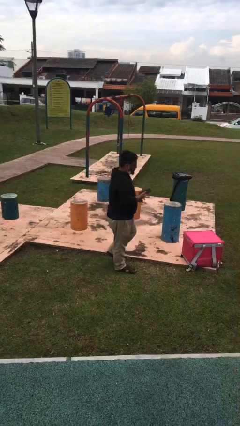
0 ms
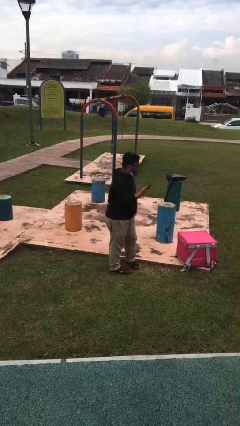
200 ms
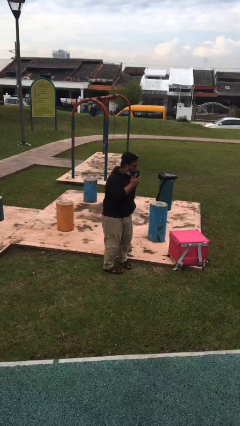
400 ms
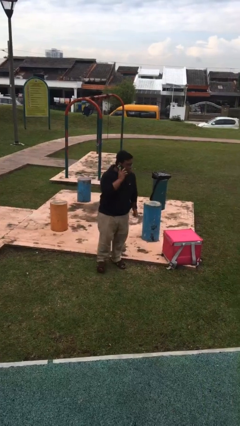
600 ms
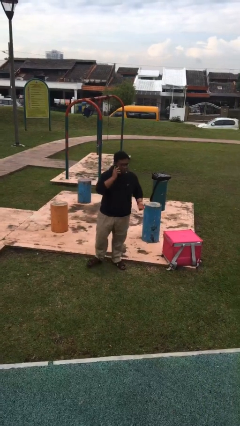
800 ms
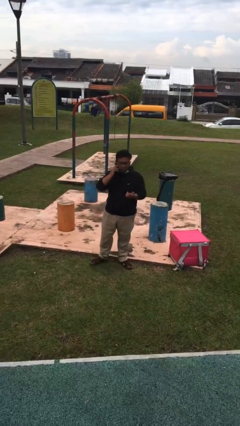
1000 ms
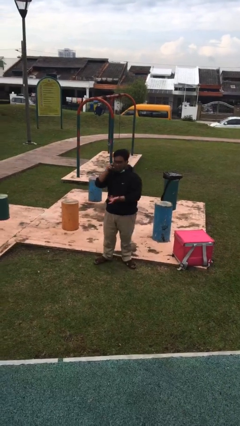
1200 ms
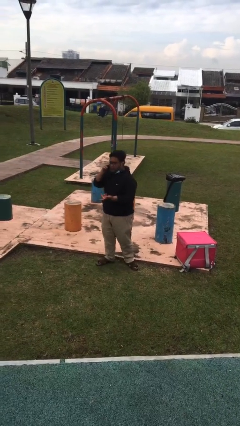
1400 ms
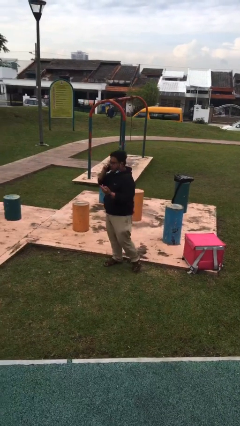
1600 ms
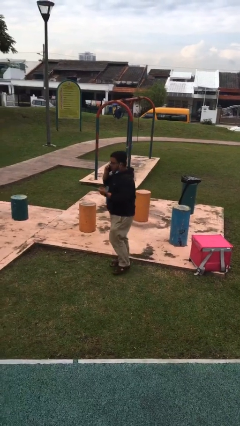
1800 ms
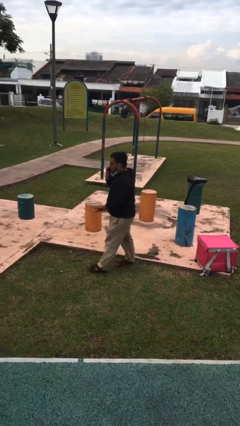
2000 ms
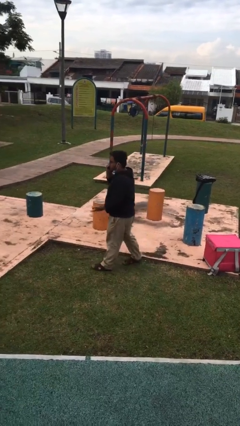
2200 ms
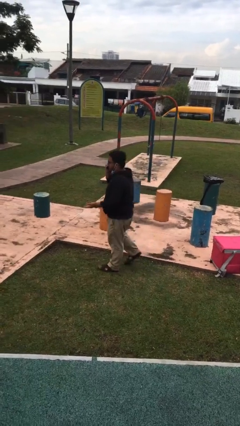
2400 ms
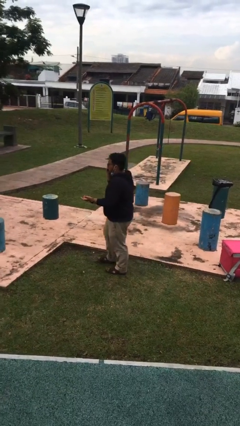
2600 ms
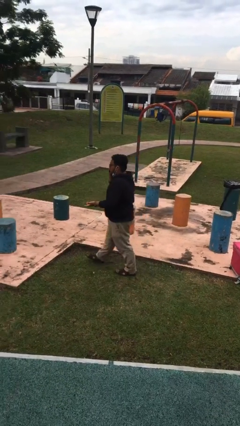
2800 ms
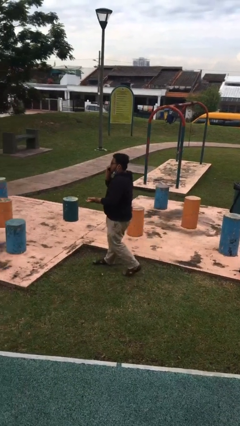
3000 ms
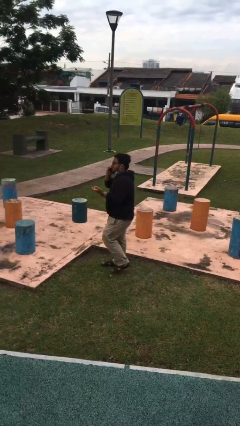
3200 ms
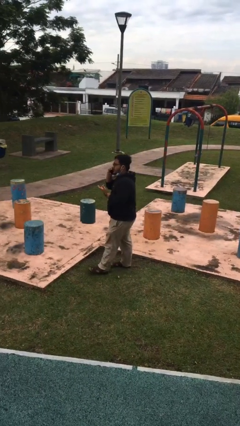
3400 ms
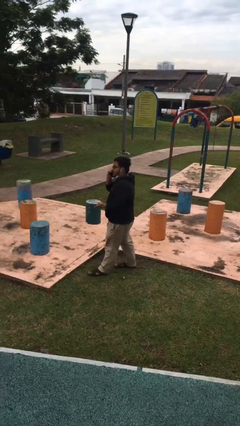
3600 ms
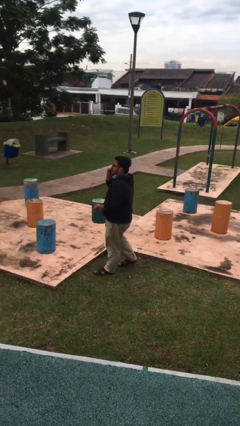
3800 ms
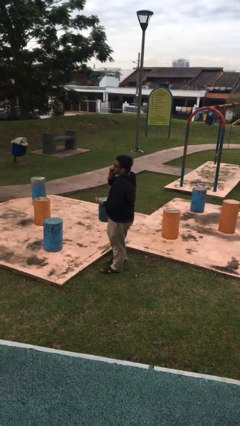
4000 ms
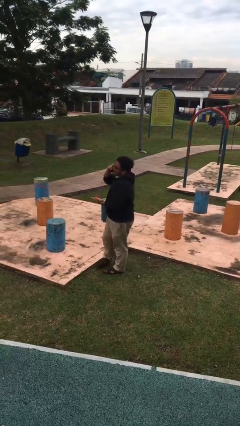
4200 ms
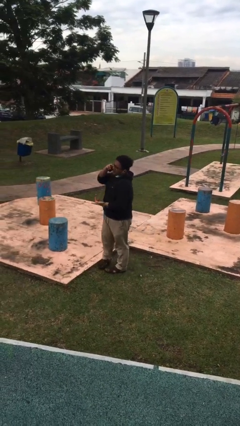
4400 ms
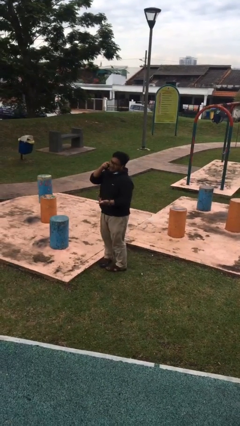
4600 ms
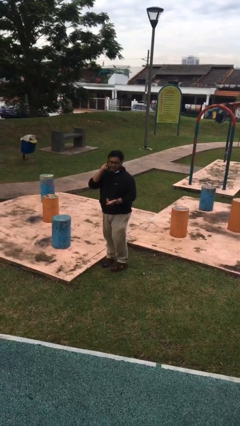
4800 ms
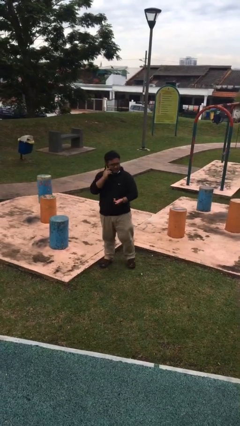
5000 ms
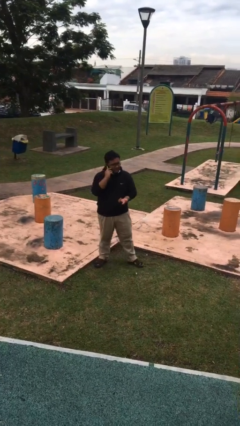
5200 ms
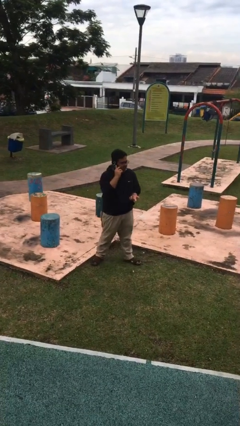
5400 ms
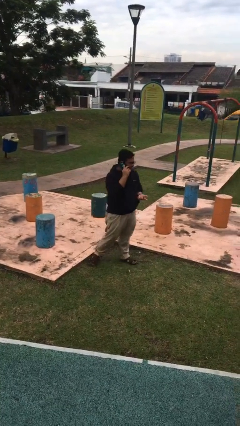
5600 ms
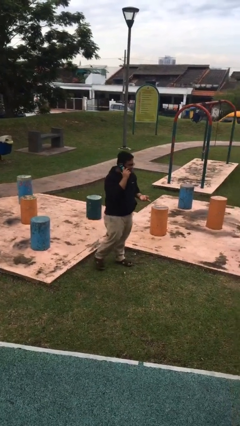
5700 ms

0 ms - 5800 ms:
person talks on phone

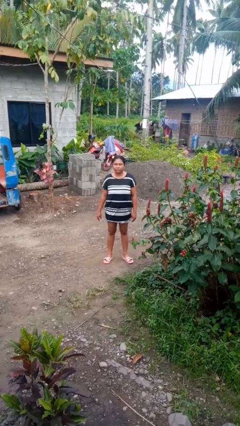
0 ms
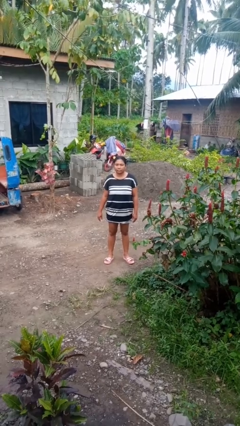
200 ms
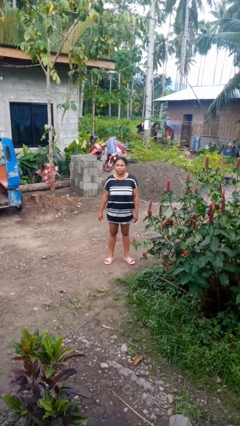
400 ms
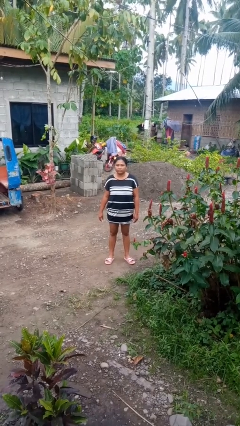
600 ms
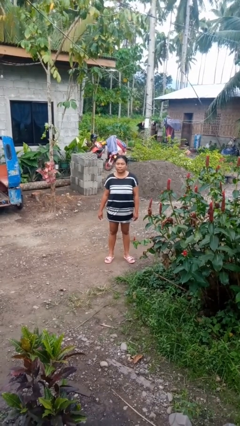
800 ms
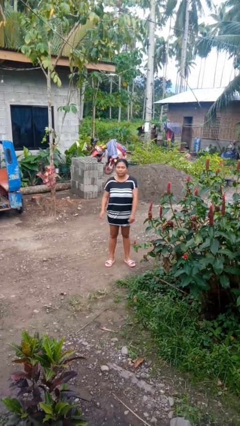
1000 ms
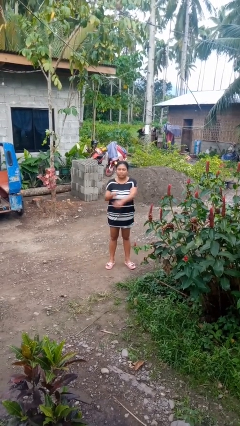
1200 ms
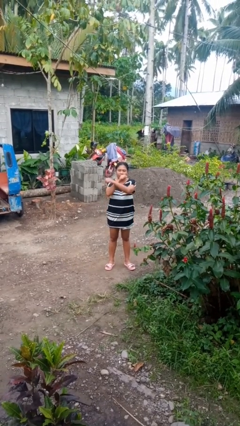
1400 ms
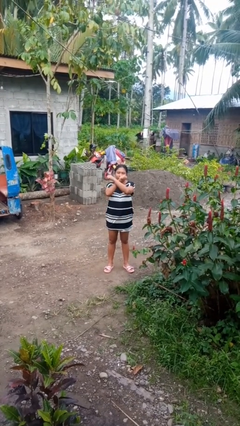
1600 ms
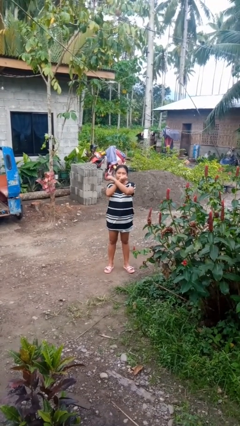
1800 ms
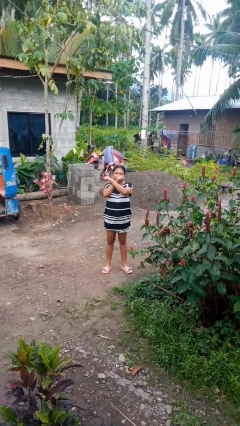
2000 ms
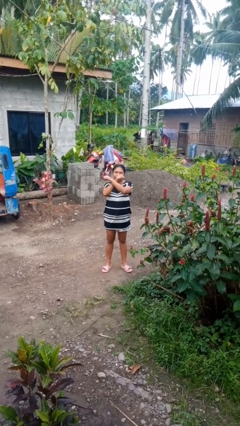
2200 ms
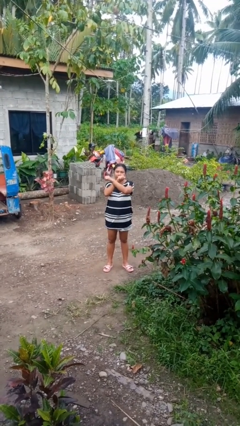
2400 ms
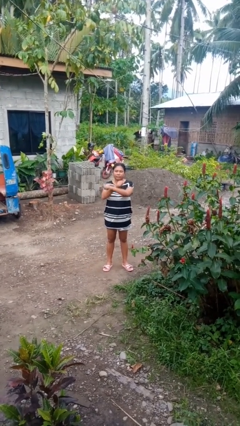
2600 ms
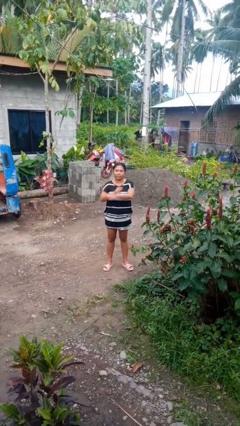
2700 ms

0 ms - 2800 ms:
person gestures arms x

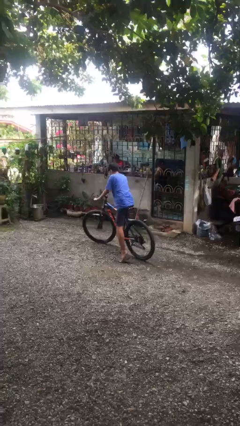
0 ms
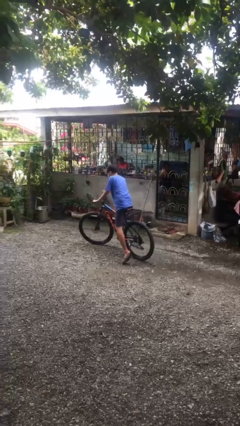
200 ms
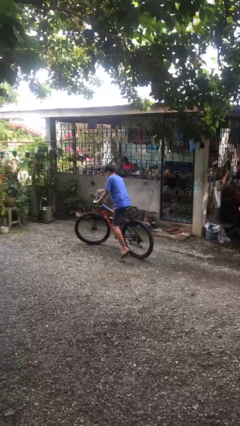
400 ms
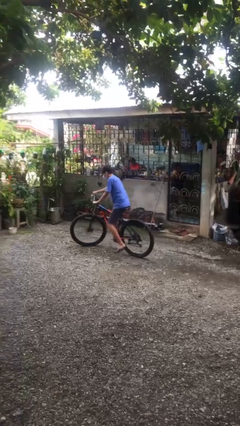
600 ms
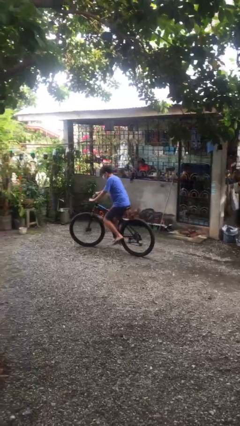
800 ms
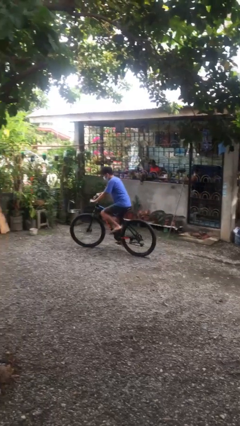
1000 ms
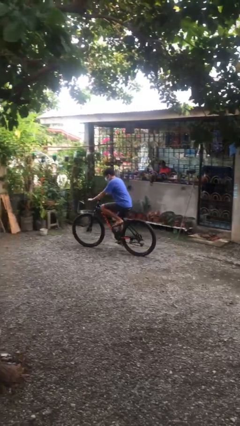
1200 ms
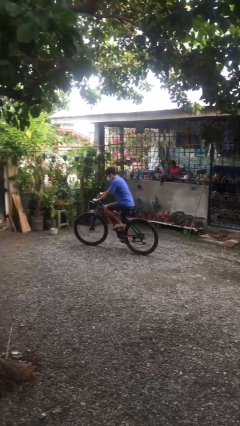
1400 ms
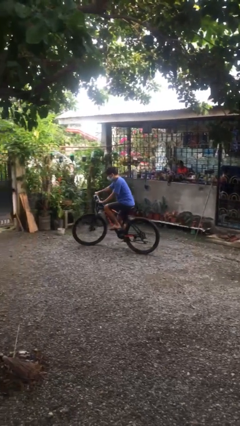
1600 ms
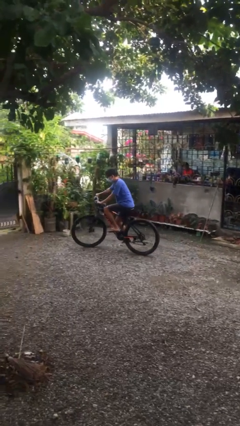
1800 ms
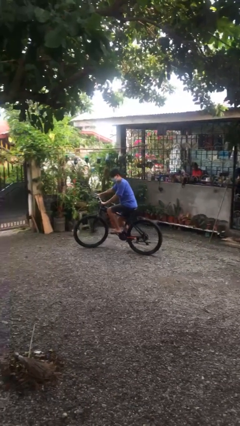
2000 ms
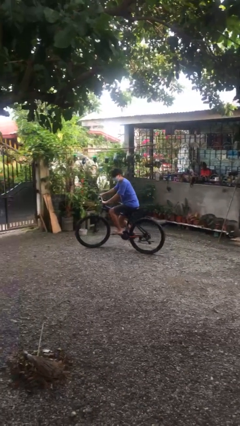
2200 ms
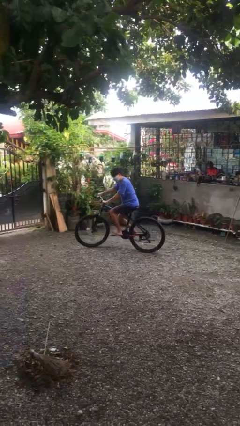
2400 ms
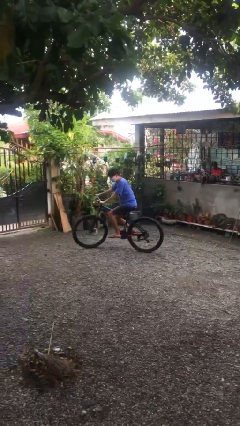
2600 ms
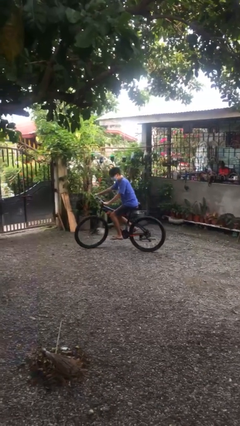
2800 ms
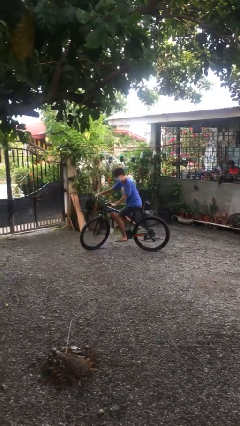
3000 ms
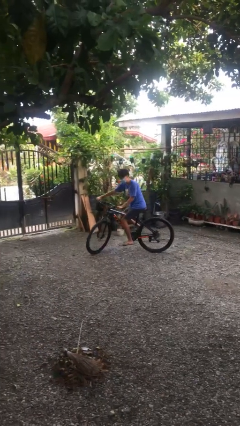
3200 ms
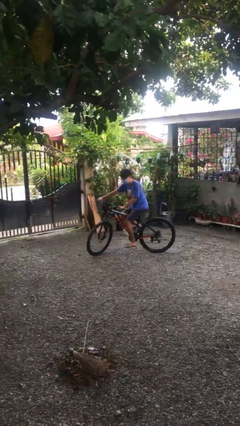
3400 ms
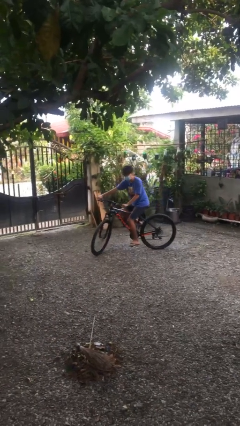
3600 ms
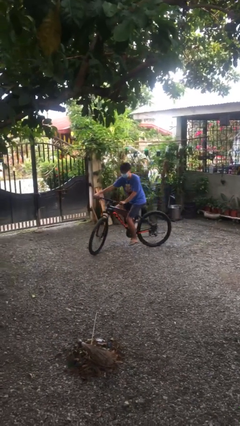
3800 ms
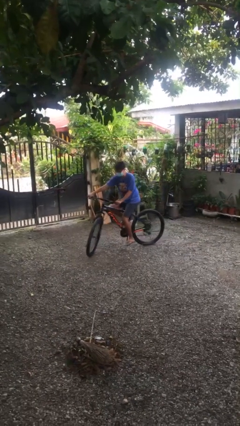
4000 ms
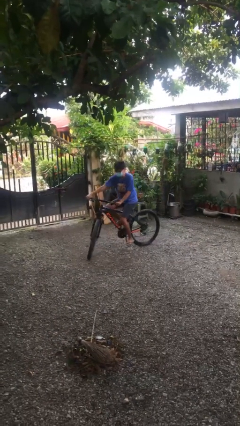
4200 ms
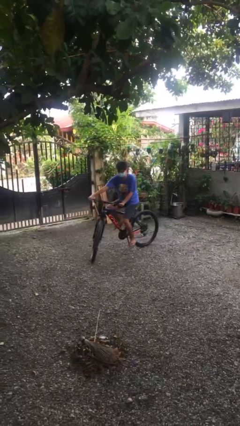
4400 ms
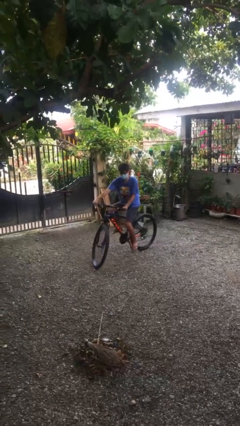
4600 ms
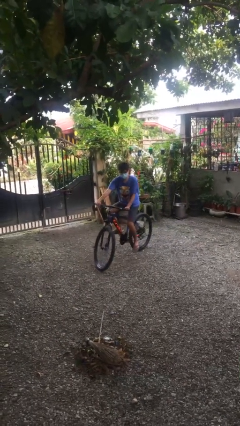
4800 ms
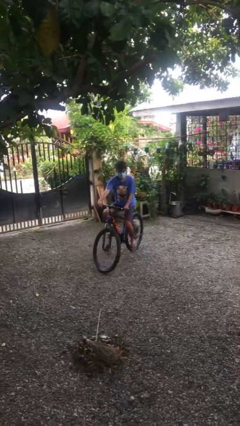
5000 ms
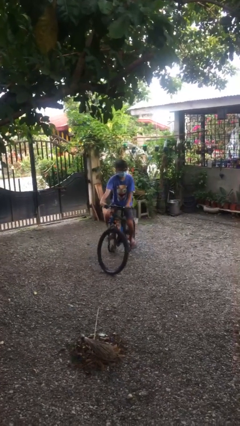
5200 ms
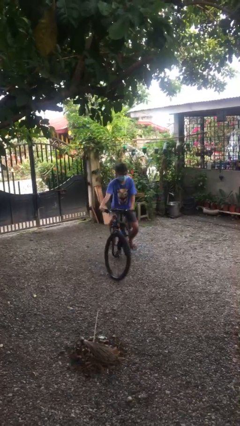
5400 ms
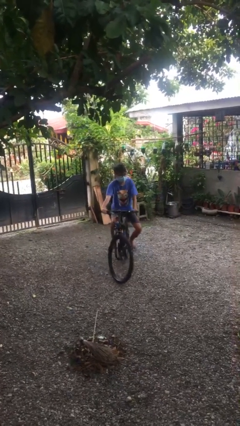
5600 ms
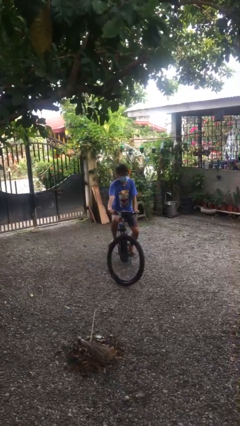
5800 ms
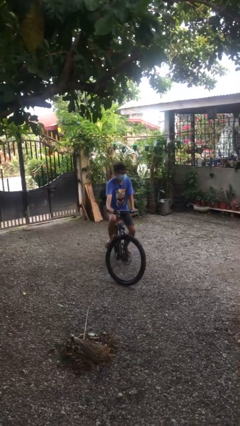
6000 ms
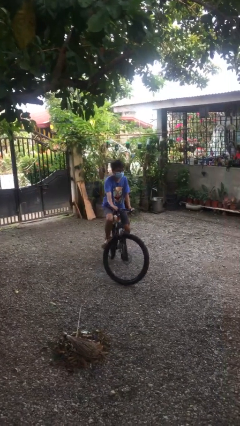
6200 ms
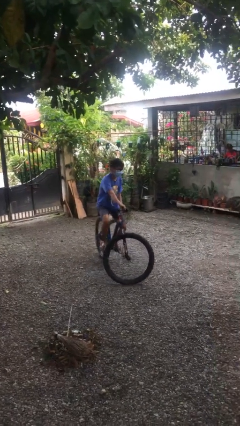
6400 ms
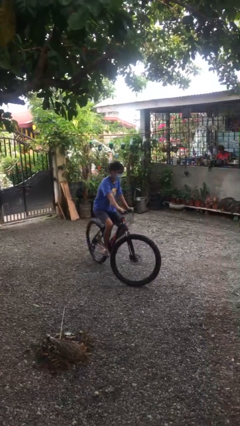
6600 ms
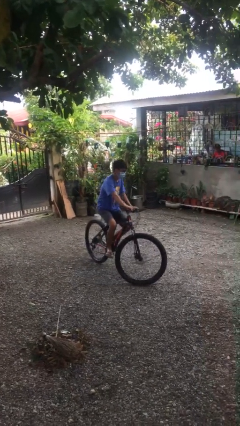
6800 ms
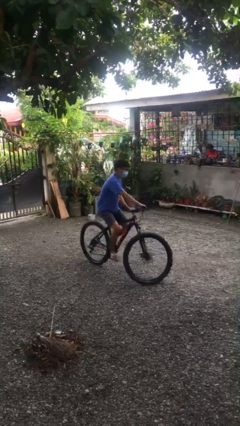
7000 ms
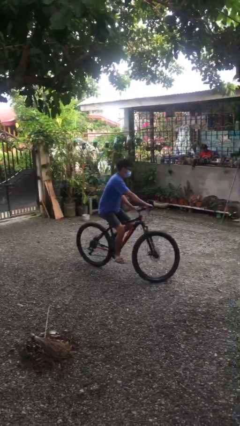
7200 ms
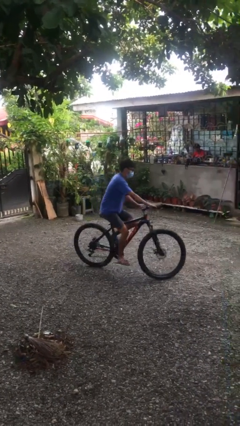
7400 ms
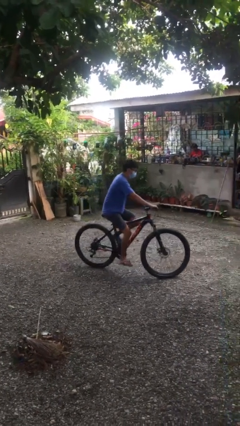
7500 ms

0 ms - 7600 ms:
person rides bicycle

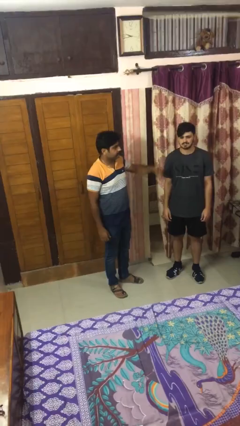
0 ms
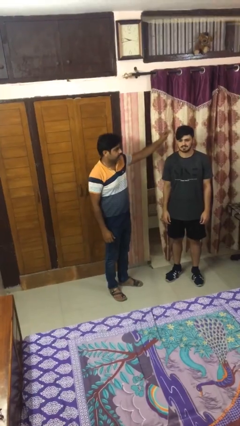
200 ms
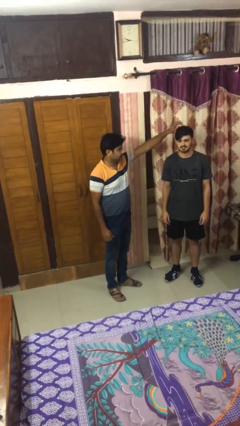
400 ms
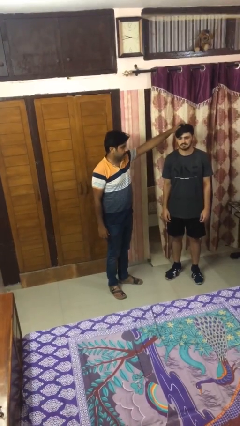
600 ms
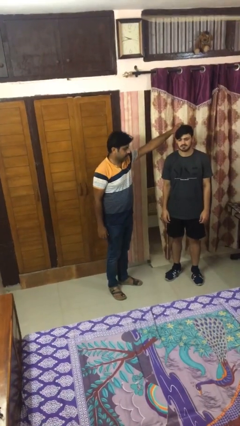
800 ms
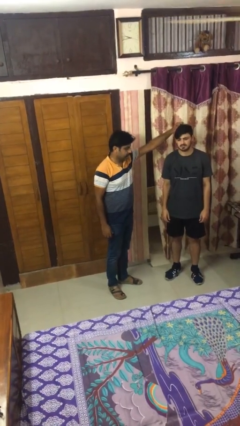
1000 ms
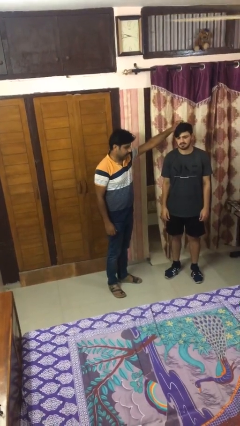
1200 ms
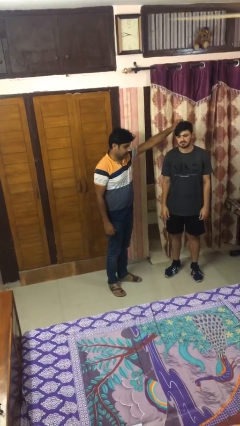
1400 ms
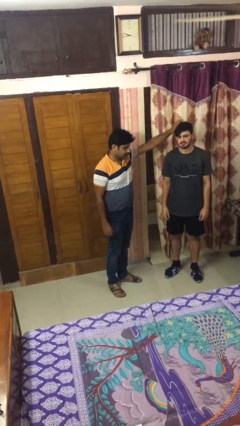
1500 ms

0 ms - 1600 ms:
person grabs person by hair
